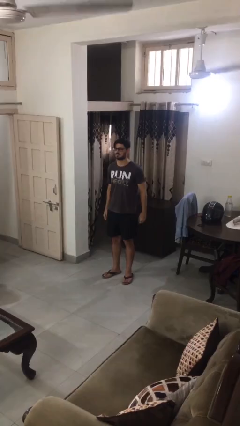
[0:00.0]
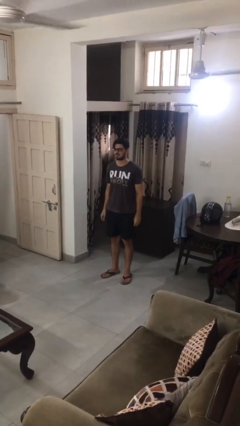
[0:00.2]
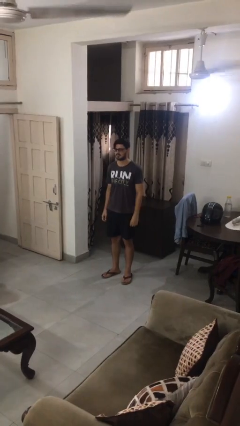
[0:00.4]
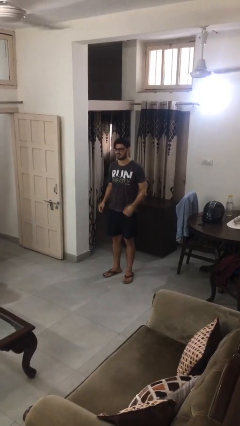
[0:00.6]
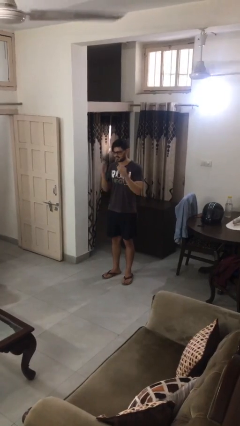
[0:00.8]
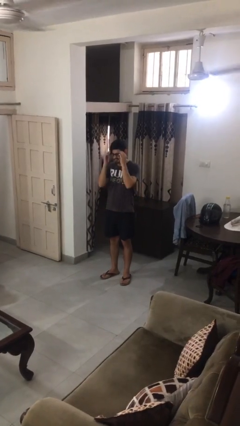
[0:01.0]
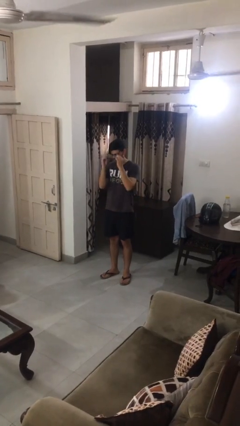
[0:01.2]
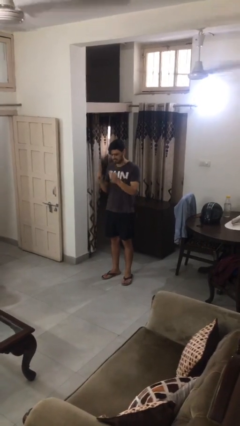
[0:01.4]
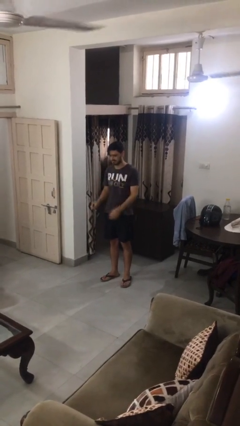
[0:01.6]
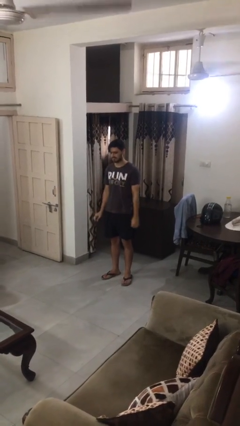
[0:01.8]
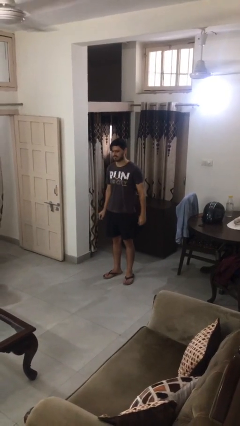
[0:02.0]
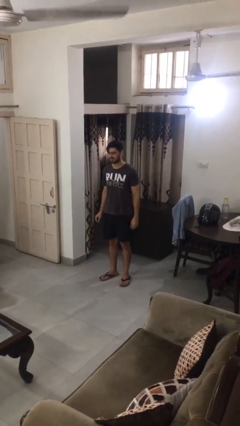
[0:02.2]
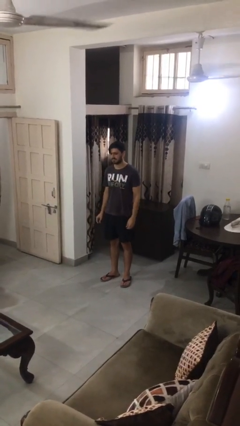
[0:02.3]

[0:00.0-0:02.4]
person takes off glasses

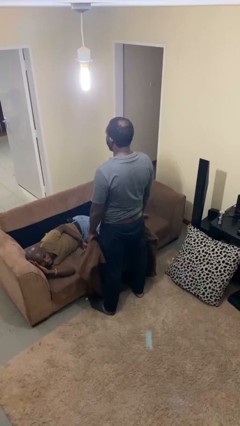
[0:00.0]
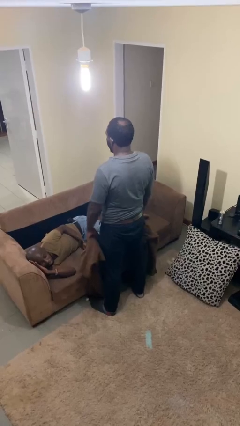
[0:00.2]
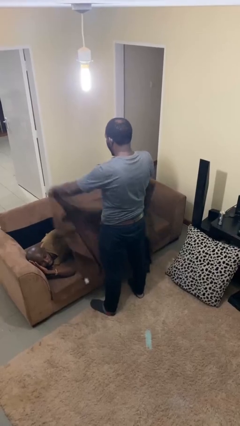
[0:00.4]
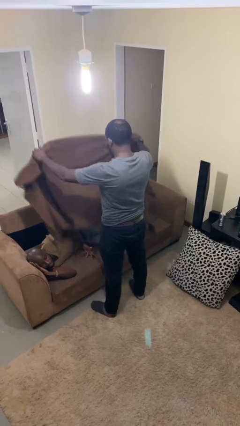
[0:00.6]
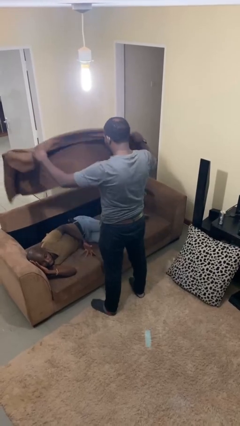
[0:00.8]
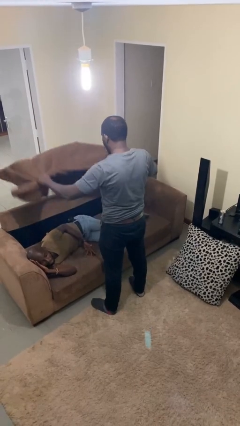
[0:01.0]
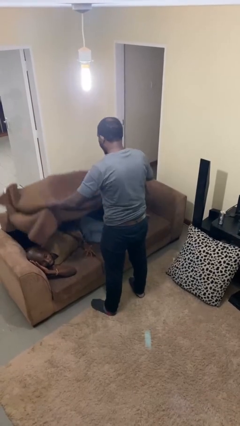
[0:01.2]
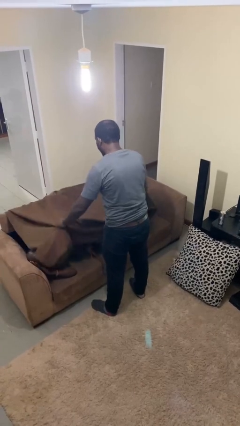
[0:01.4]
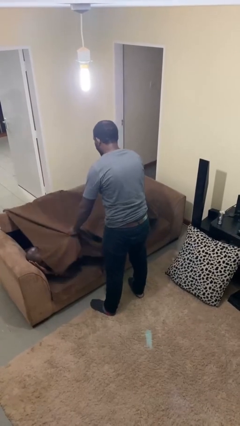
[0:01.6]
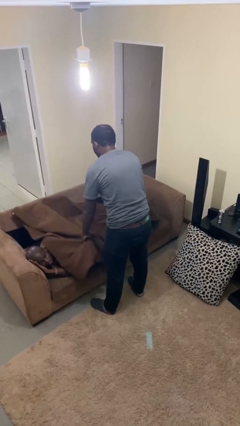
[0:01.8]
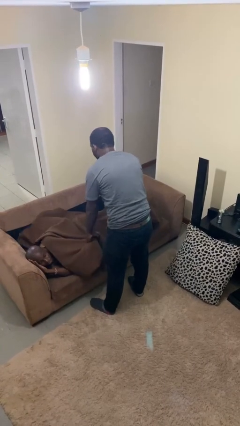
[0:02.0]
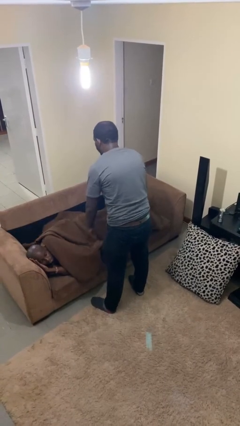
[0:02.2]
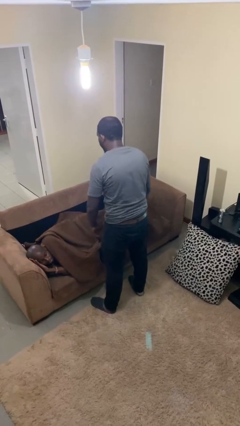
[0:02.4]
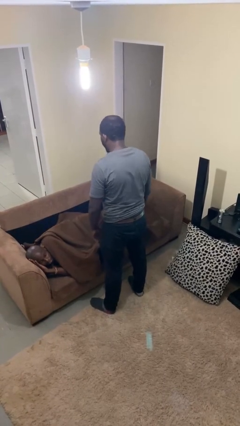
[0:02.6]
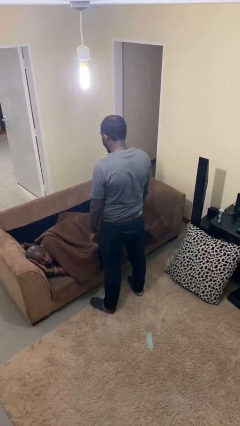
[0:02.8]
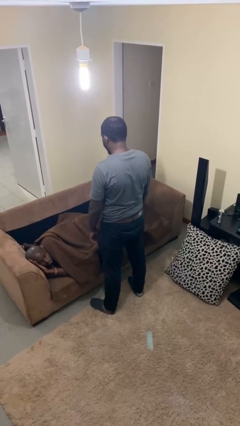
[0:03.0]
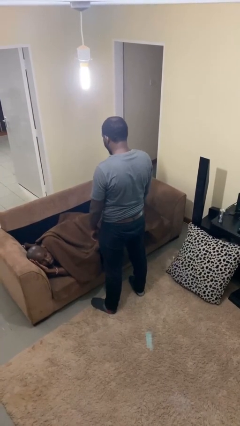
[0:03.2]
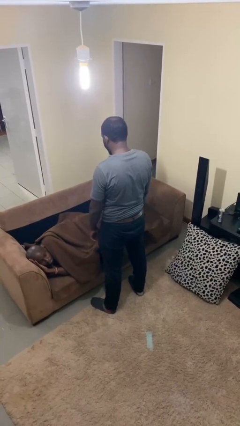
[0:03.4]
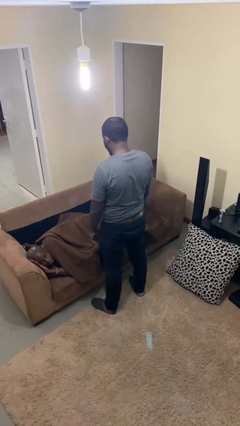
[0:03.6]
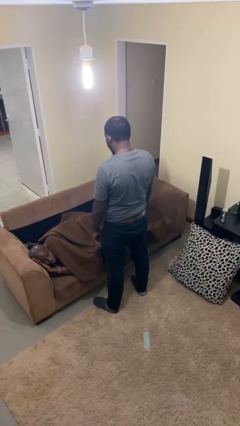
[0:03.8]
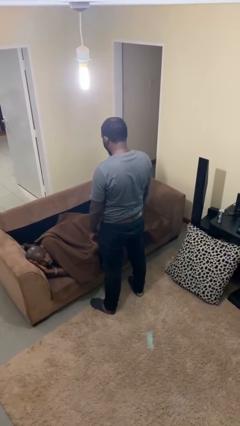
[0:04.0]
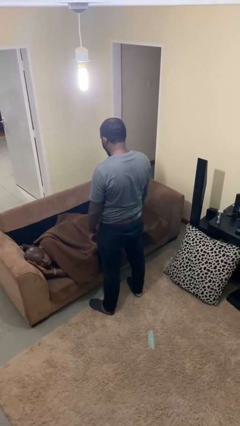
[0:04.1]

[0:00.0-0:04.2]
person covers friend with blanket

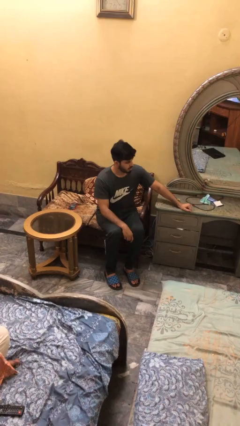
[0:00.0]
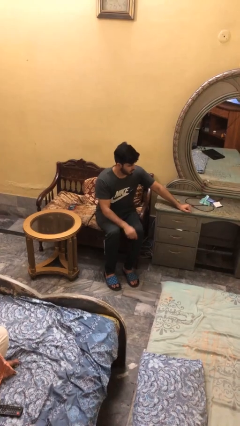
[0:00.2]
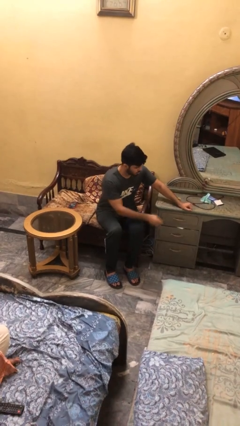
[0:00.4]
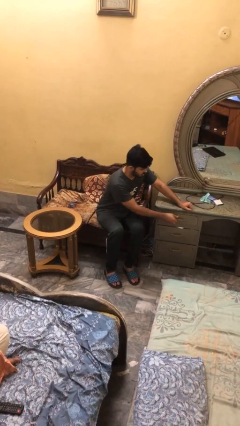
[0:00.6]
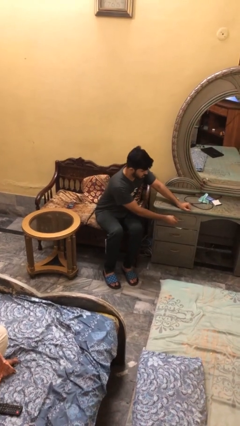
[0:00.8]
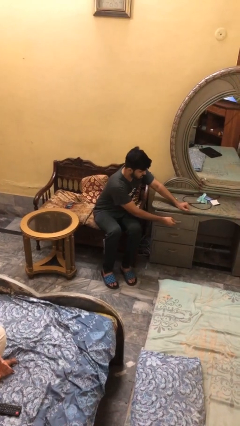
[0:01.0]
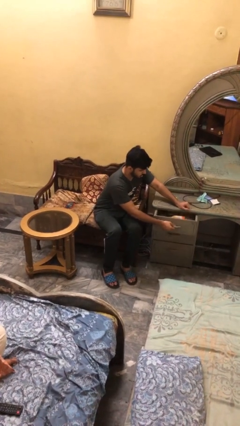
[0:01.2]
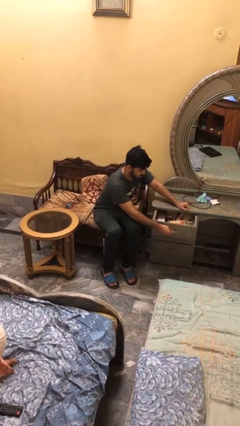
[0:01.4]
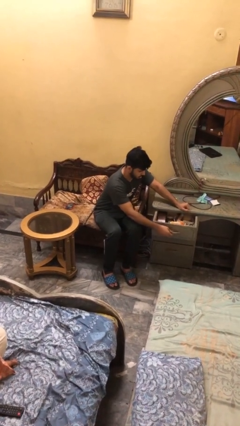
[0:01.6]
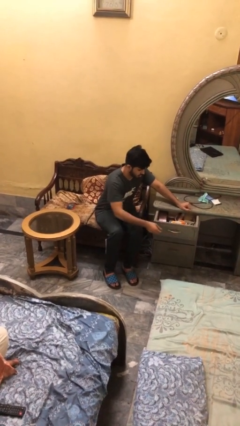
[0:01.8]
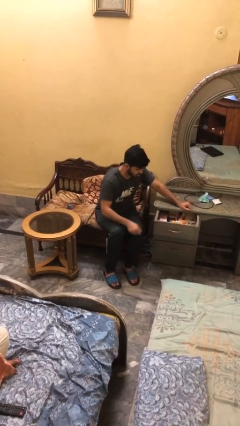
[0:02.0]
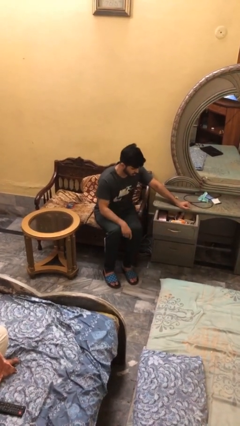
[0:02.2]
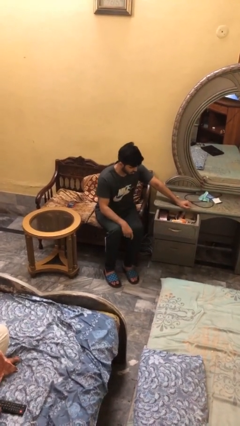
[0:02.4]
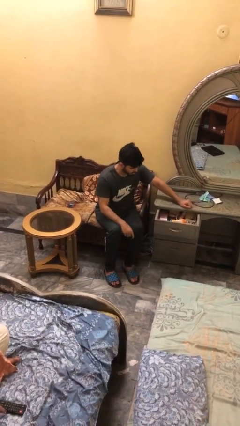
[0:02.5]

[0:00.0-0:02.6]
person opens dresser drawer

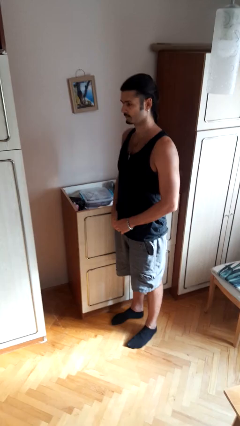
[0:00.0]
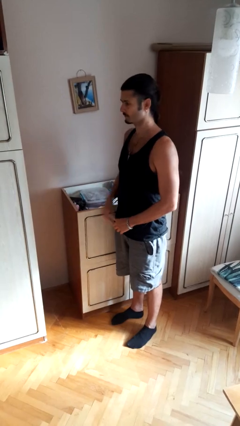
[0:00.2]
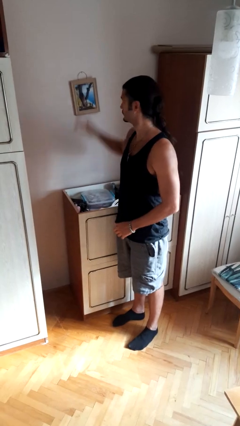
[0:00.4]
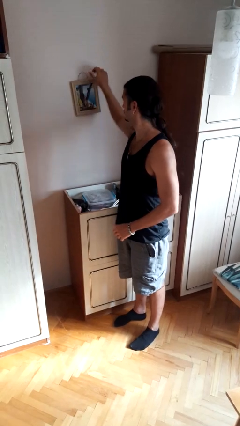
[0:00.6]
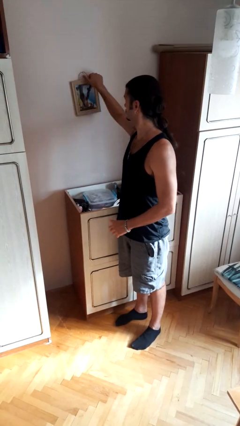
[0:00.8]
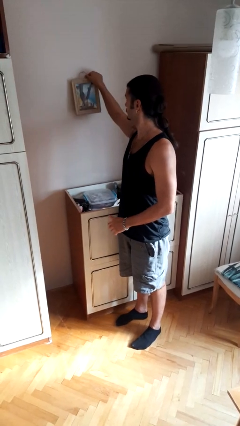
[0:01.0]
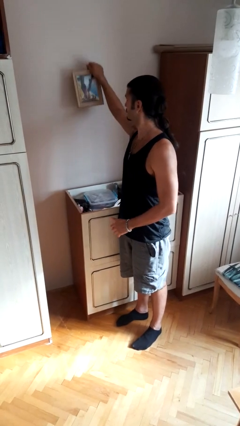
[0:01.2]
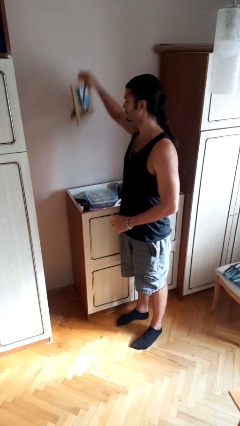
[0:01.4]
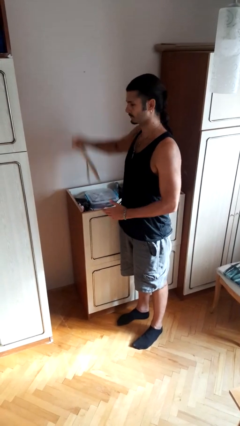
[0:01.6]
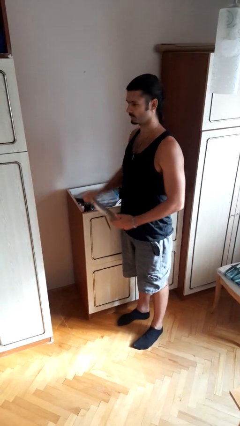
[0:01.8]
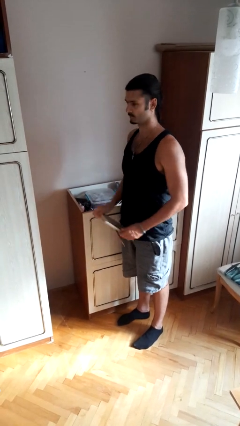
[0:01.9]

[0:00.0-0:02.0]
person takes down picture frame

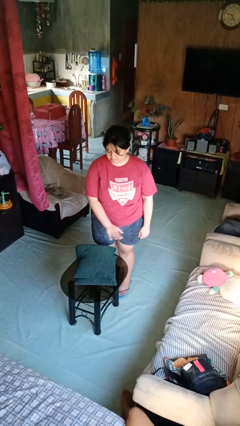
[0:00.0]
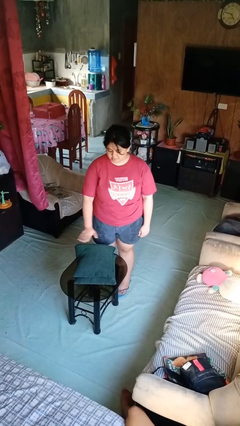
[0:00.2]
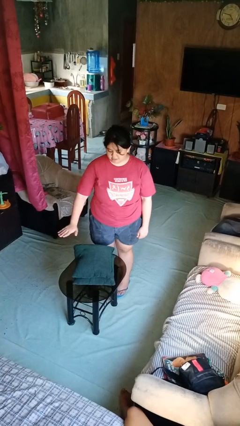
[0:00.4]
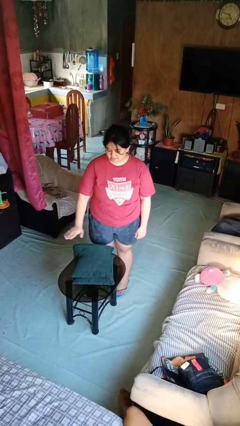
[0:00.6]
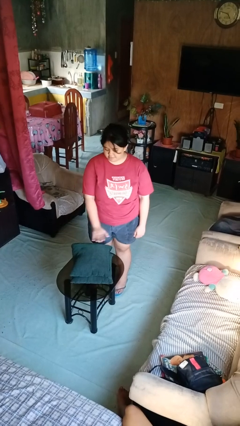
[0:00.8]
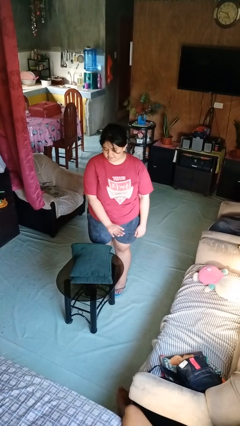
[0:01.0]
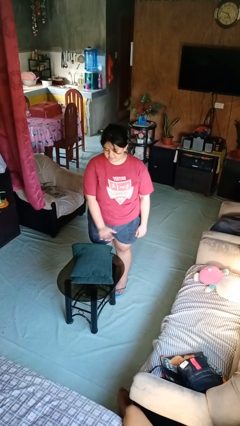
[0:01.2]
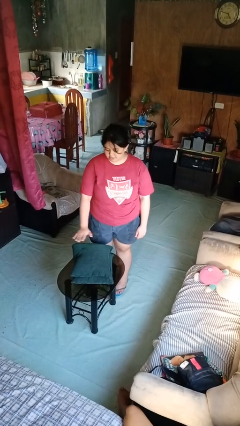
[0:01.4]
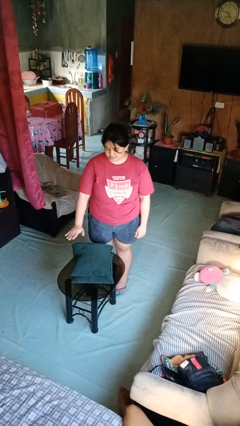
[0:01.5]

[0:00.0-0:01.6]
person waves hand over object

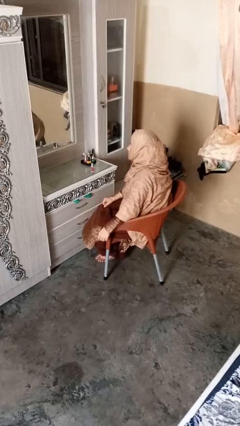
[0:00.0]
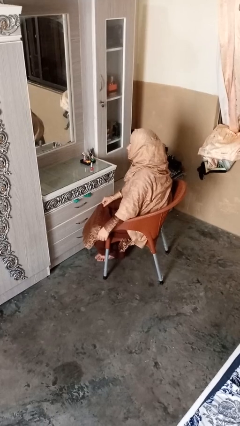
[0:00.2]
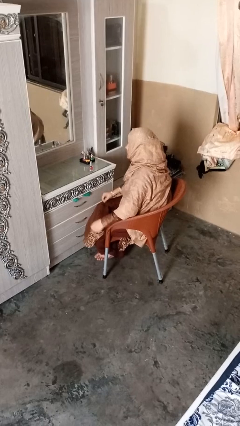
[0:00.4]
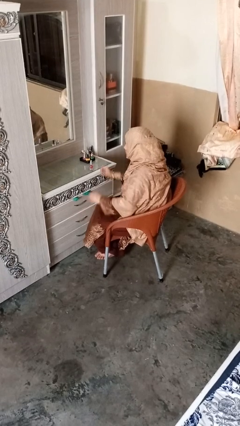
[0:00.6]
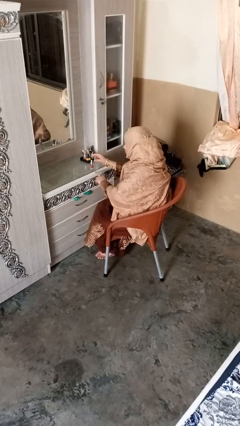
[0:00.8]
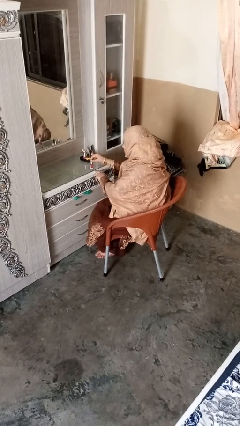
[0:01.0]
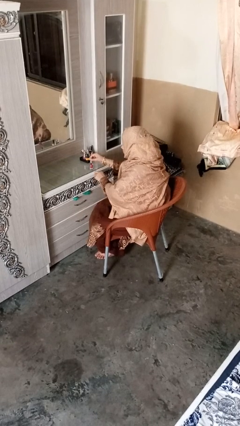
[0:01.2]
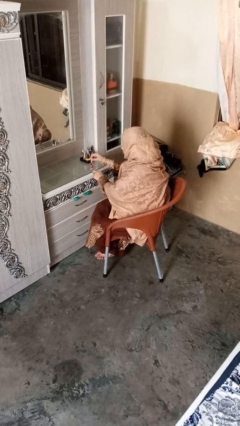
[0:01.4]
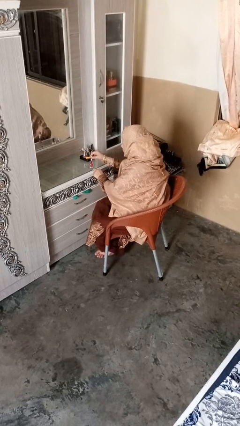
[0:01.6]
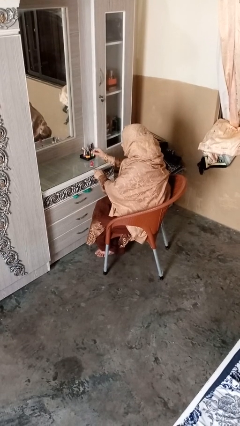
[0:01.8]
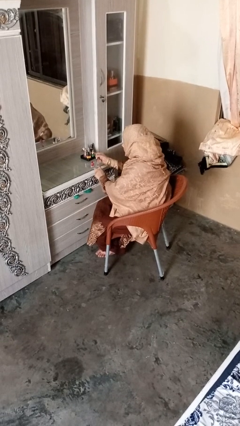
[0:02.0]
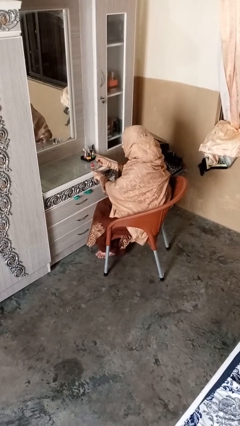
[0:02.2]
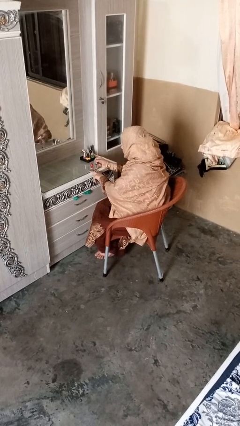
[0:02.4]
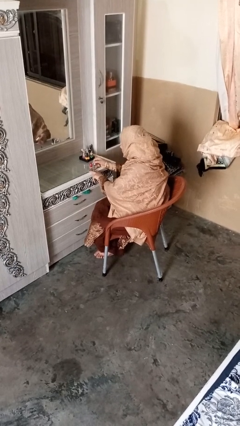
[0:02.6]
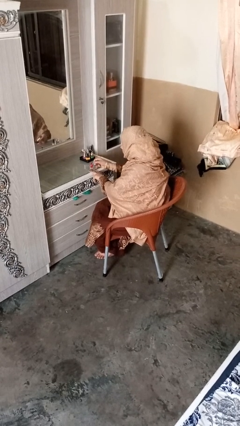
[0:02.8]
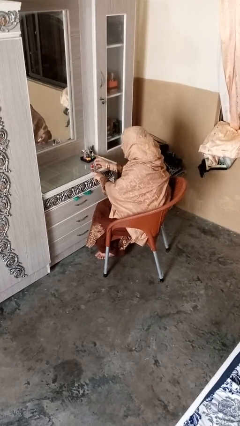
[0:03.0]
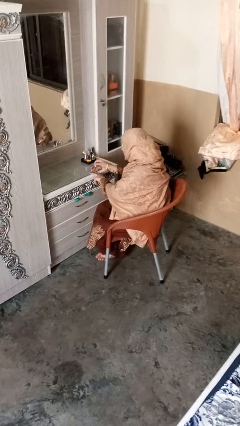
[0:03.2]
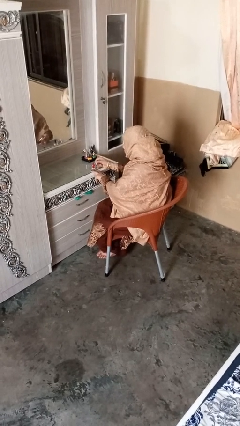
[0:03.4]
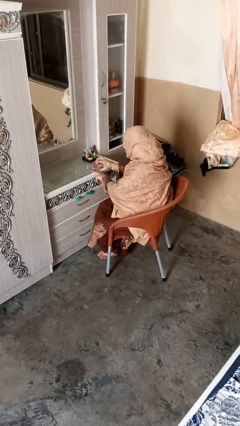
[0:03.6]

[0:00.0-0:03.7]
person paints fingernails

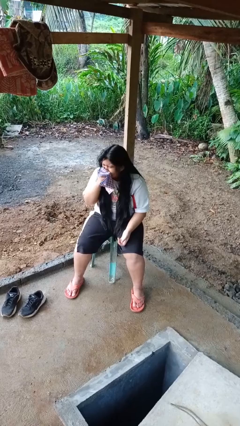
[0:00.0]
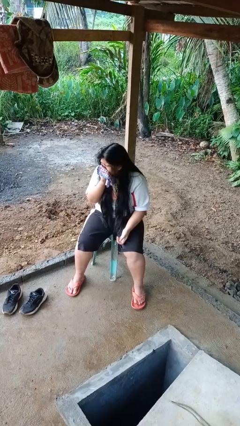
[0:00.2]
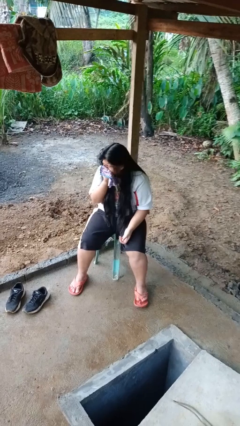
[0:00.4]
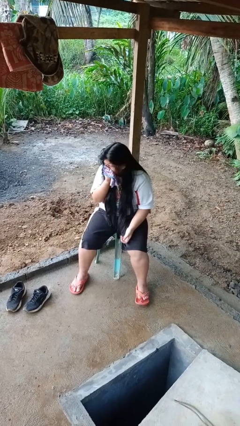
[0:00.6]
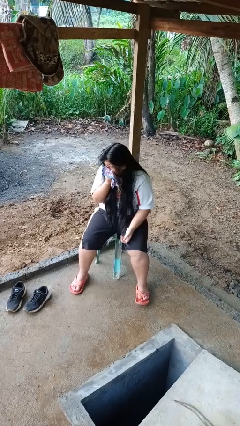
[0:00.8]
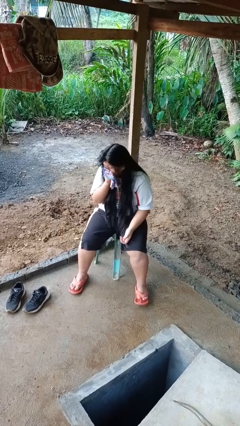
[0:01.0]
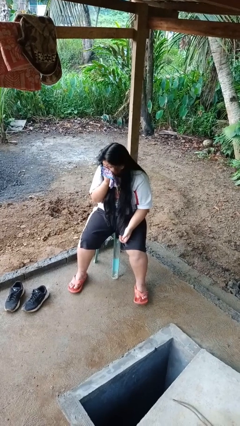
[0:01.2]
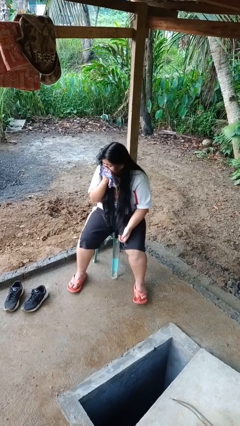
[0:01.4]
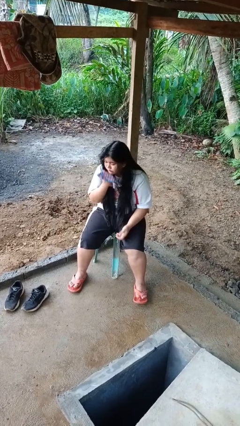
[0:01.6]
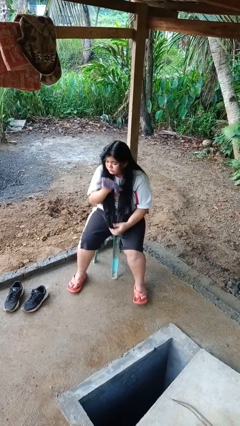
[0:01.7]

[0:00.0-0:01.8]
person blows nose
